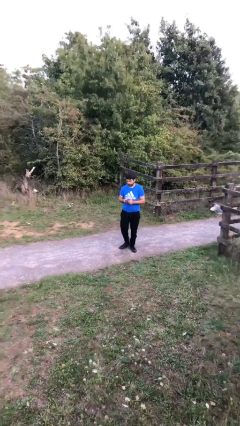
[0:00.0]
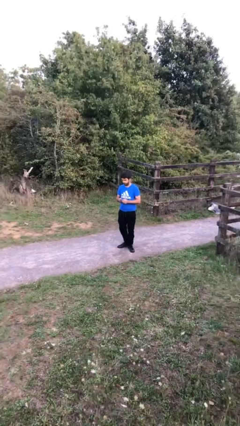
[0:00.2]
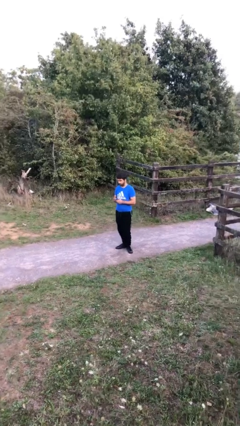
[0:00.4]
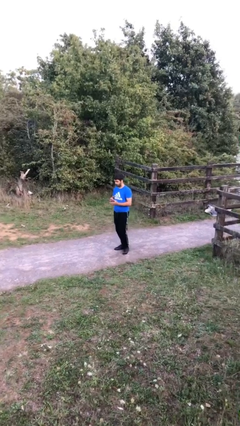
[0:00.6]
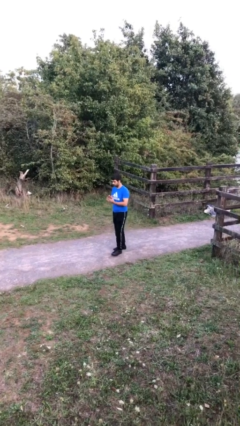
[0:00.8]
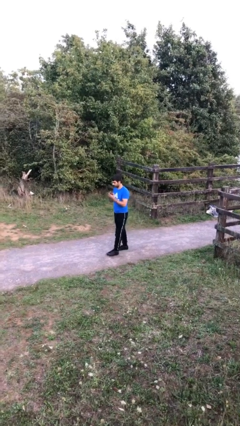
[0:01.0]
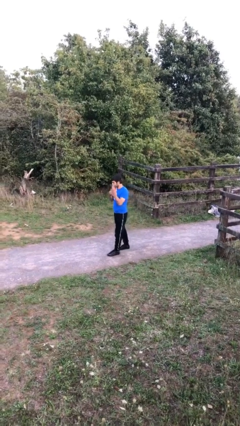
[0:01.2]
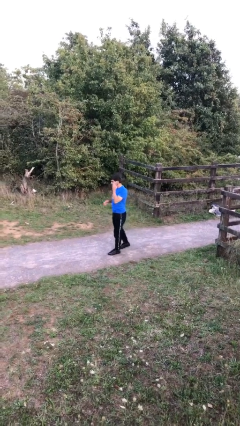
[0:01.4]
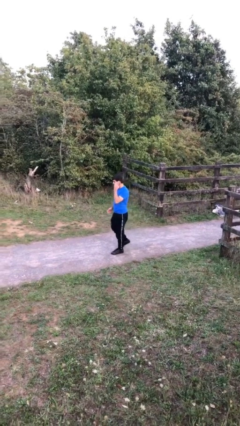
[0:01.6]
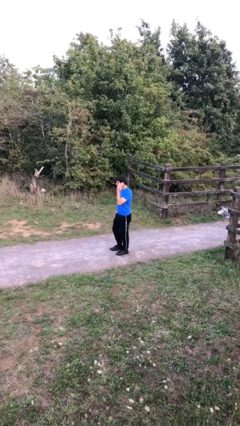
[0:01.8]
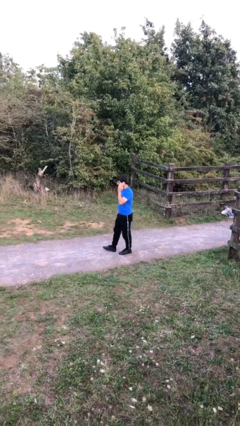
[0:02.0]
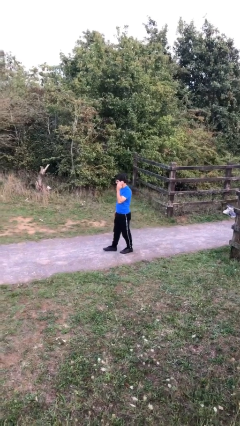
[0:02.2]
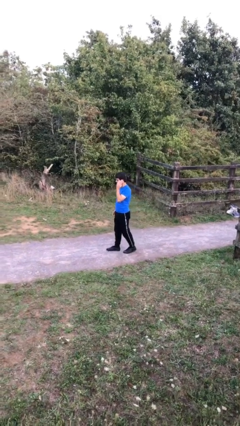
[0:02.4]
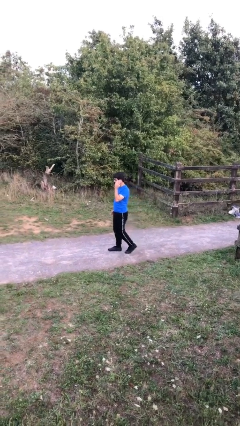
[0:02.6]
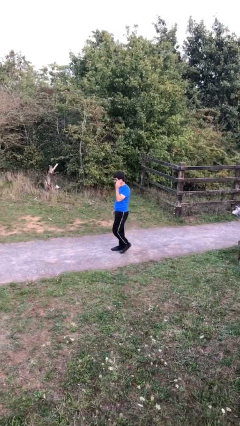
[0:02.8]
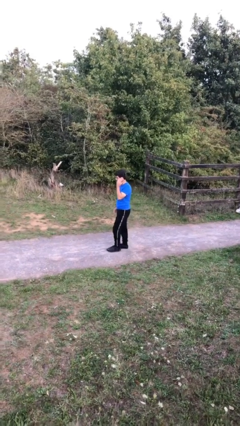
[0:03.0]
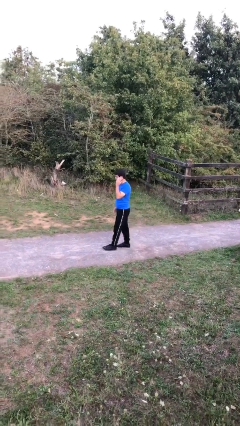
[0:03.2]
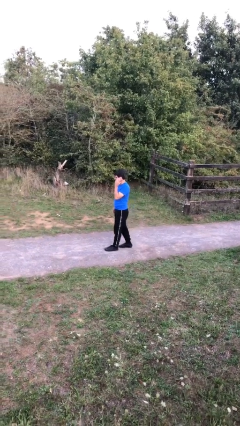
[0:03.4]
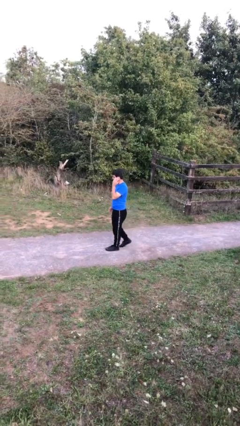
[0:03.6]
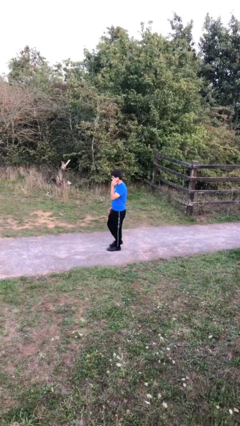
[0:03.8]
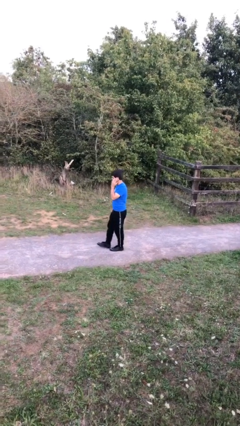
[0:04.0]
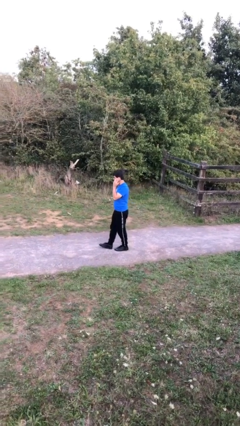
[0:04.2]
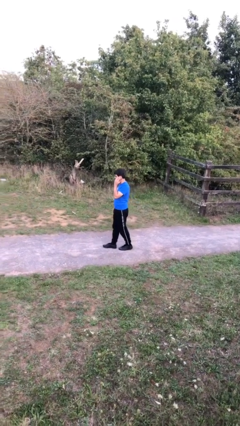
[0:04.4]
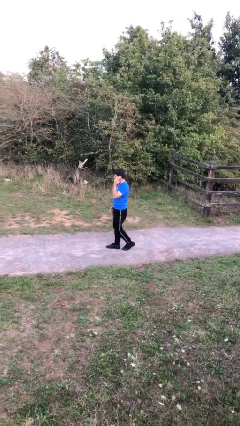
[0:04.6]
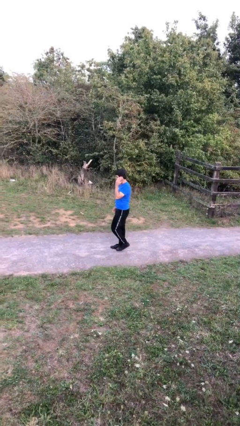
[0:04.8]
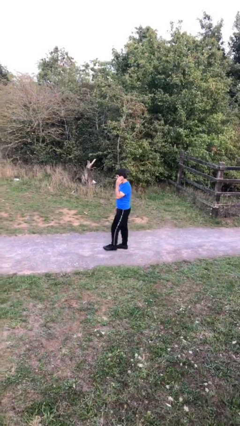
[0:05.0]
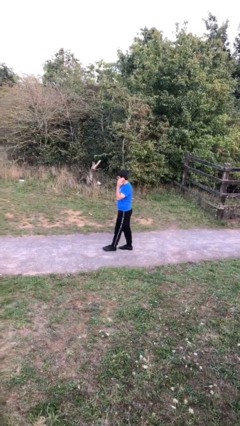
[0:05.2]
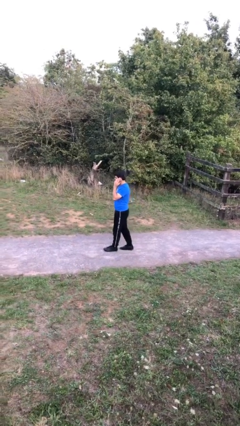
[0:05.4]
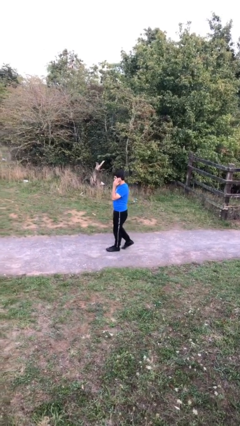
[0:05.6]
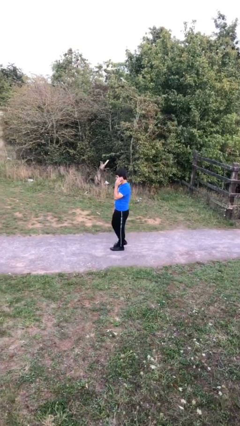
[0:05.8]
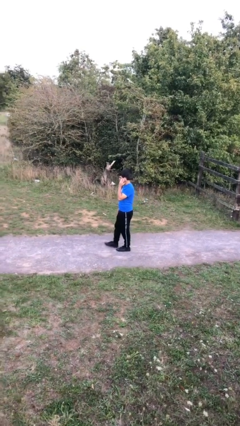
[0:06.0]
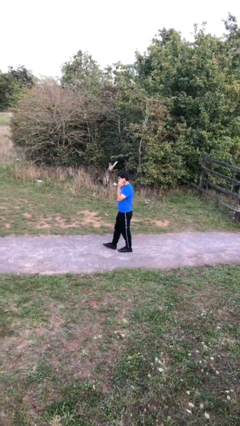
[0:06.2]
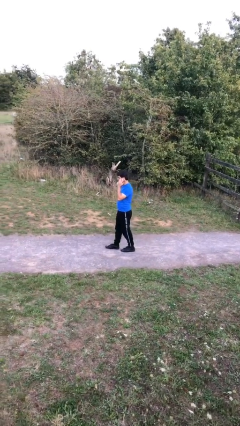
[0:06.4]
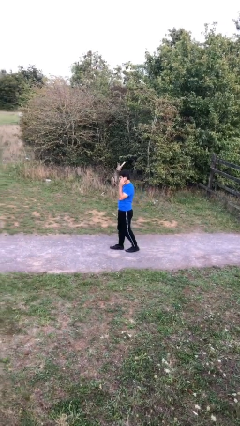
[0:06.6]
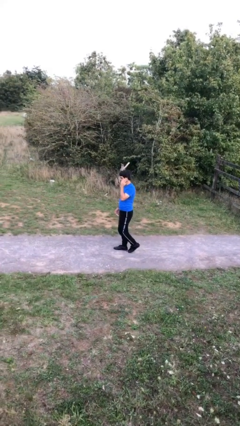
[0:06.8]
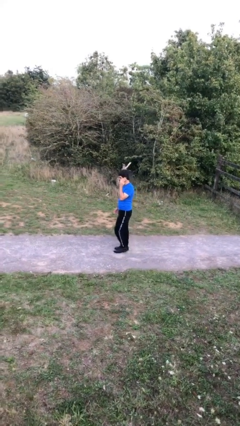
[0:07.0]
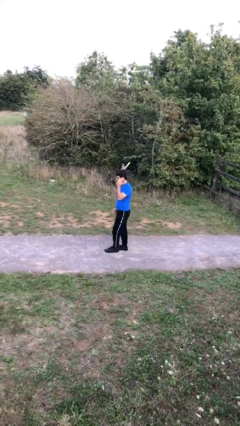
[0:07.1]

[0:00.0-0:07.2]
person talks on phone

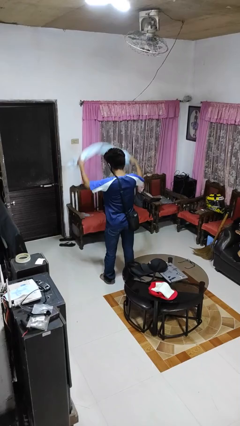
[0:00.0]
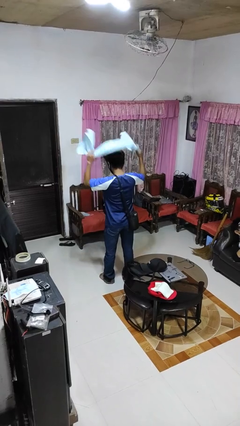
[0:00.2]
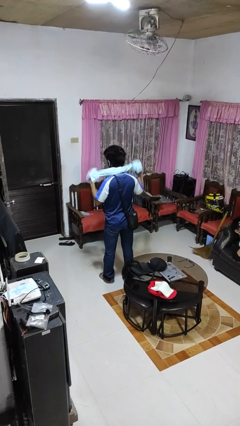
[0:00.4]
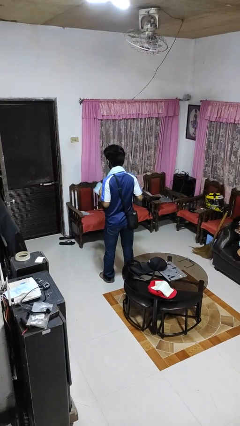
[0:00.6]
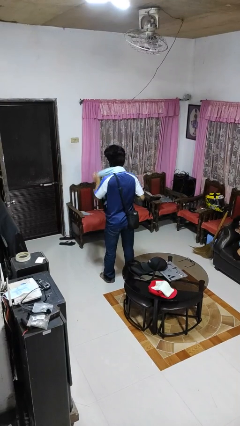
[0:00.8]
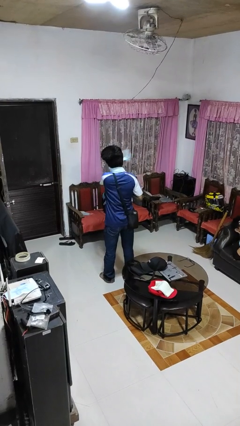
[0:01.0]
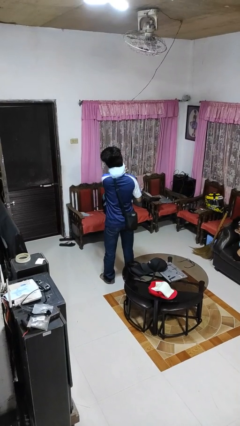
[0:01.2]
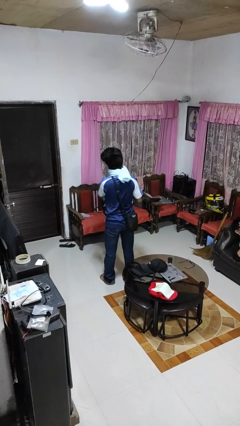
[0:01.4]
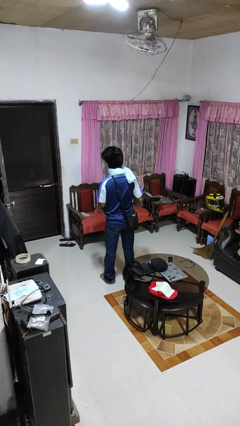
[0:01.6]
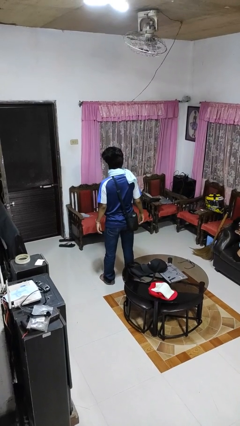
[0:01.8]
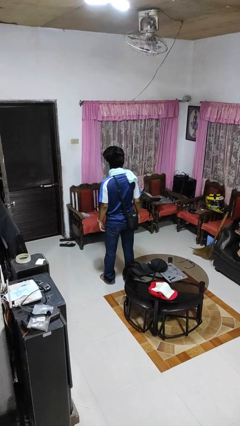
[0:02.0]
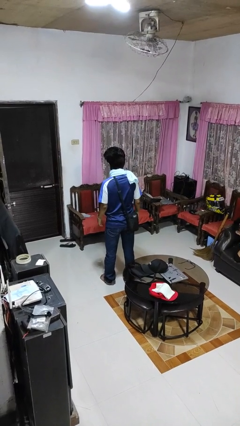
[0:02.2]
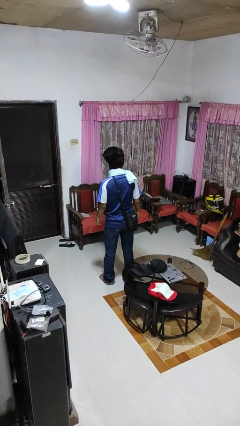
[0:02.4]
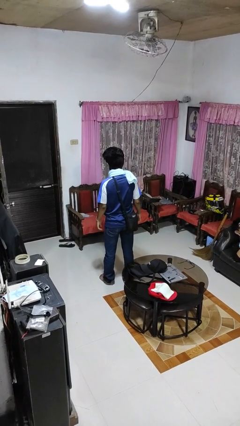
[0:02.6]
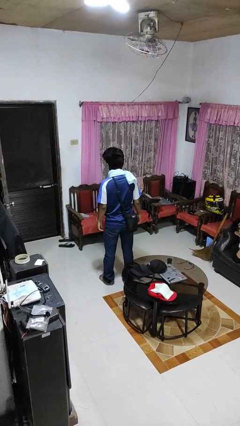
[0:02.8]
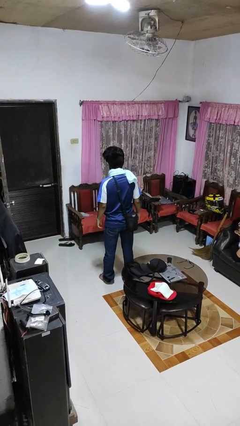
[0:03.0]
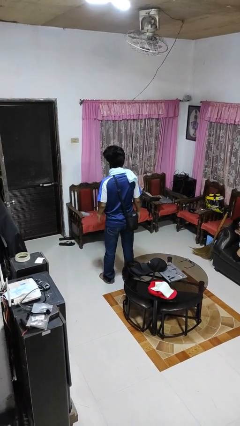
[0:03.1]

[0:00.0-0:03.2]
person puts on scarf

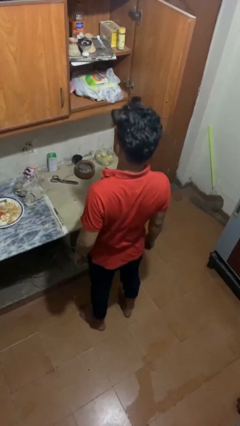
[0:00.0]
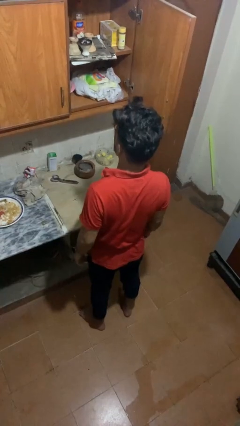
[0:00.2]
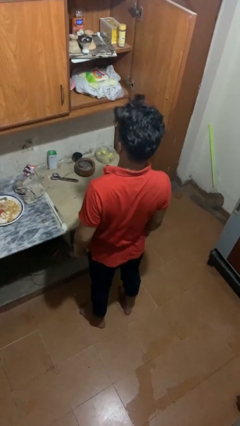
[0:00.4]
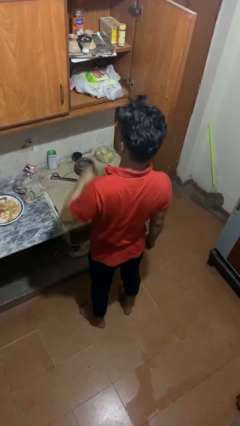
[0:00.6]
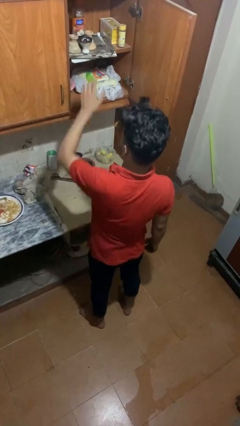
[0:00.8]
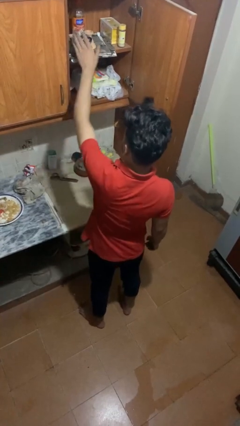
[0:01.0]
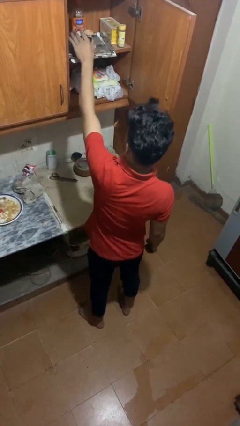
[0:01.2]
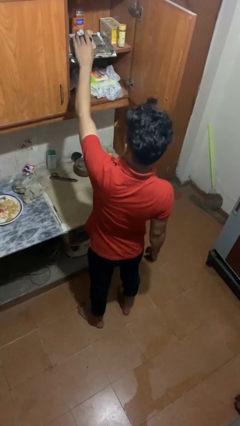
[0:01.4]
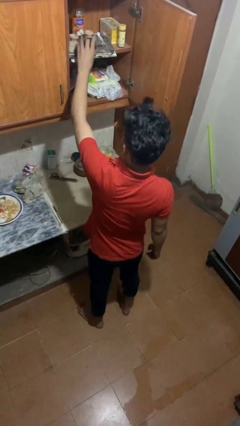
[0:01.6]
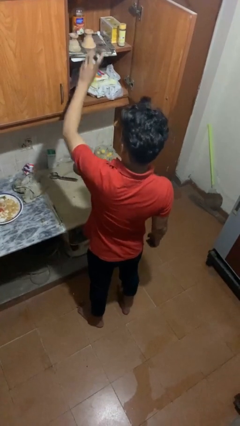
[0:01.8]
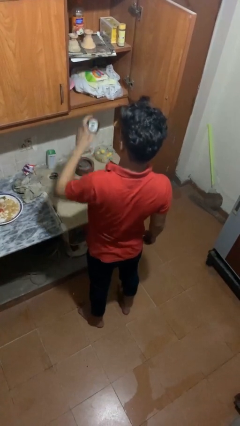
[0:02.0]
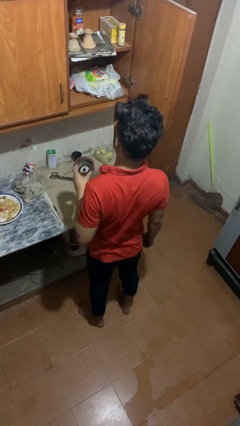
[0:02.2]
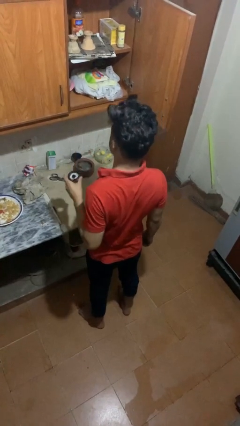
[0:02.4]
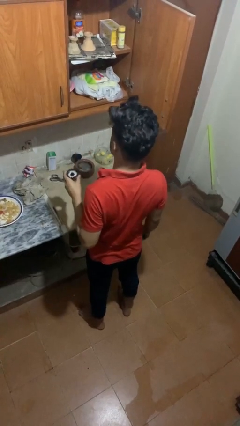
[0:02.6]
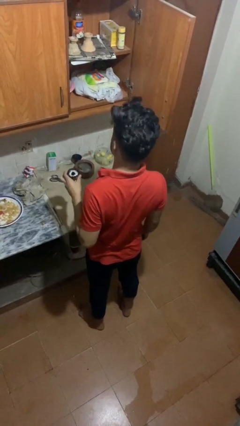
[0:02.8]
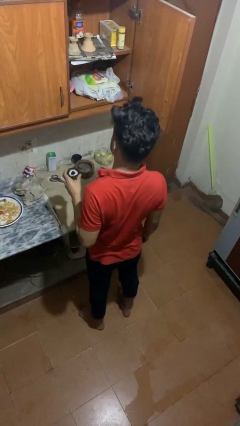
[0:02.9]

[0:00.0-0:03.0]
person takes object from cabinet

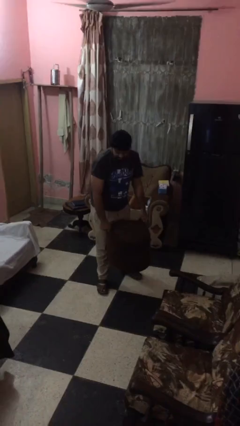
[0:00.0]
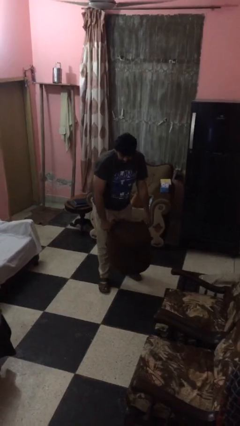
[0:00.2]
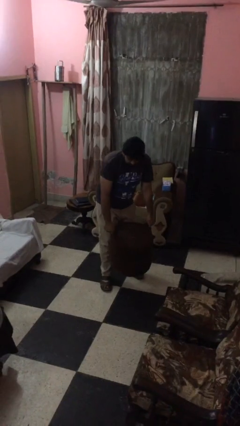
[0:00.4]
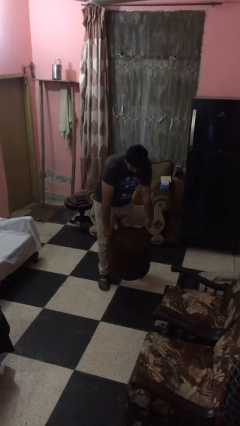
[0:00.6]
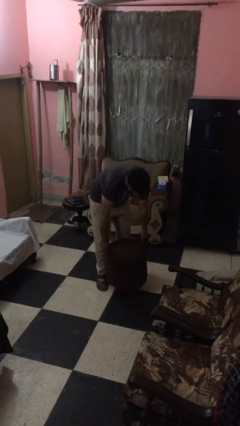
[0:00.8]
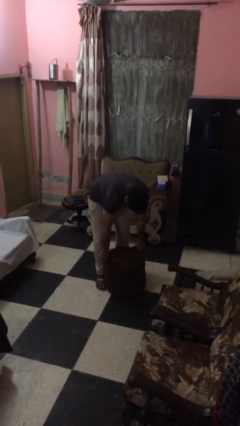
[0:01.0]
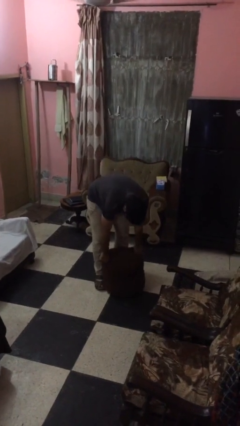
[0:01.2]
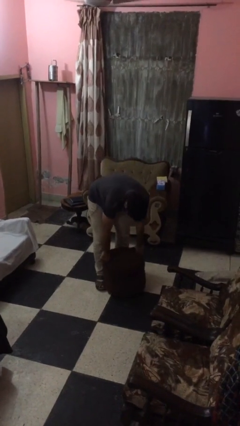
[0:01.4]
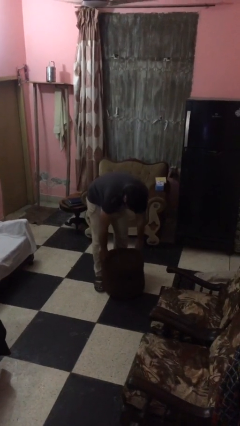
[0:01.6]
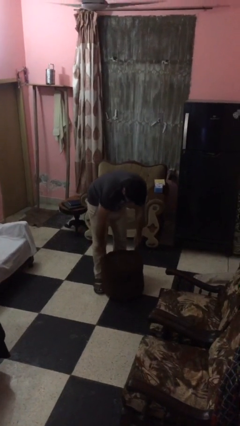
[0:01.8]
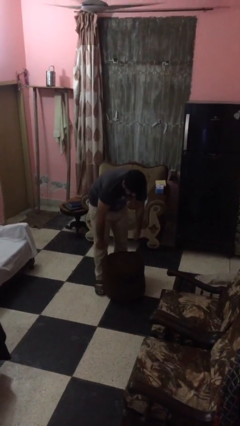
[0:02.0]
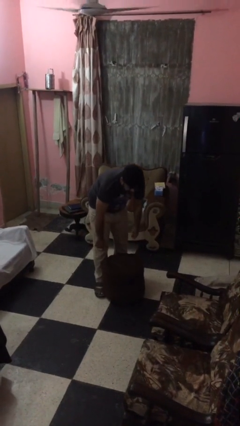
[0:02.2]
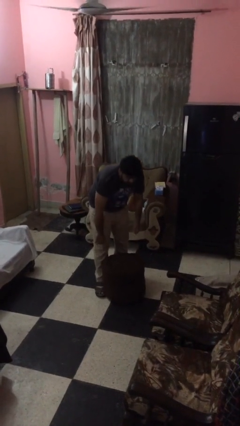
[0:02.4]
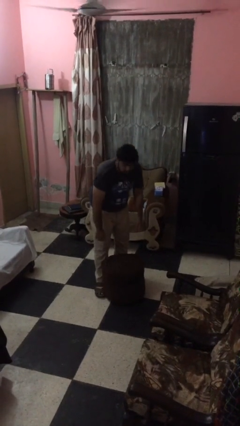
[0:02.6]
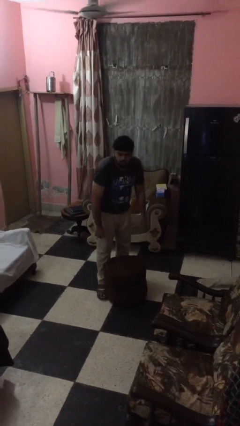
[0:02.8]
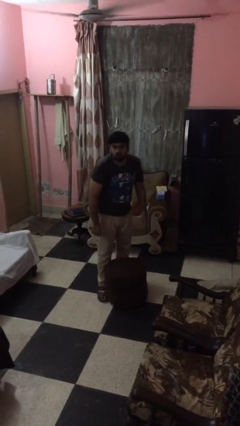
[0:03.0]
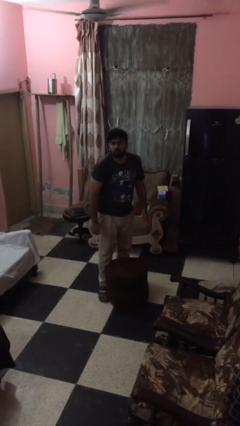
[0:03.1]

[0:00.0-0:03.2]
person puts down object on floor

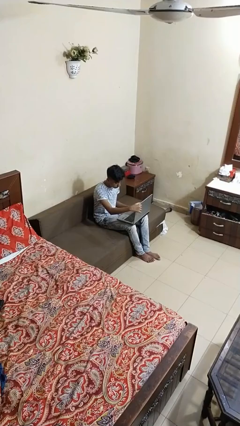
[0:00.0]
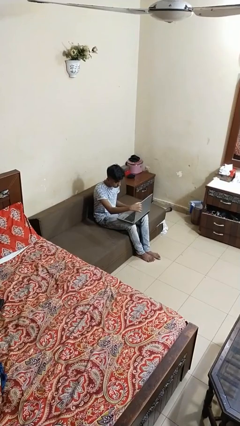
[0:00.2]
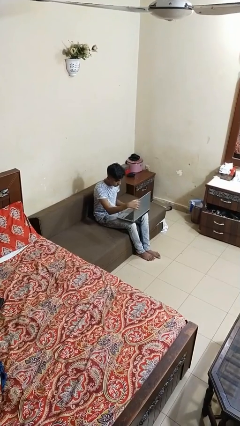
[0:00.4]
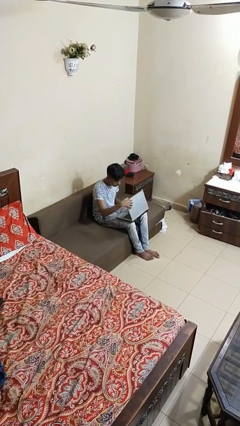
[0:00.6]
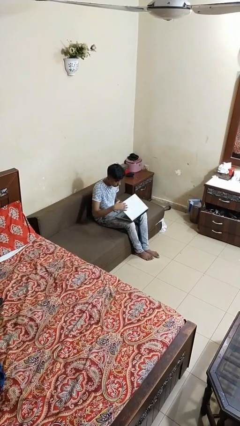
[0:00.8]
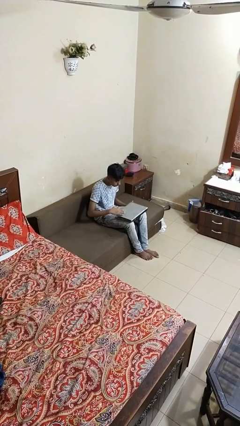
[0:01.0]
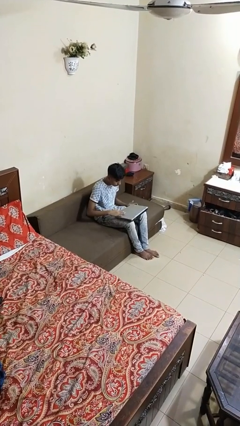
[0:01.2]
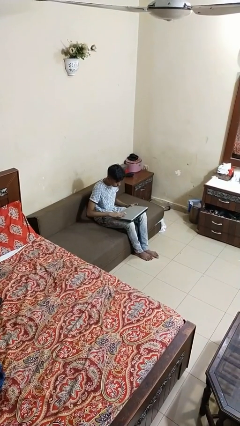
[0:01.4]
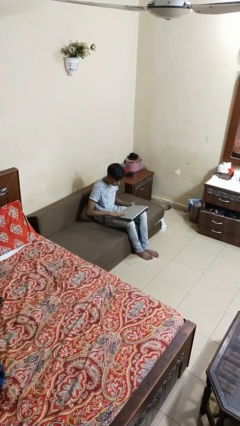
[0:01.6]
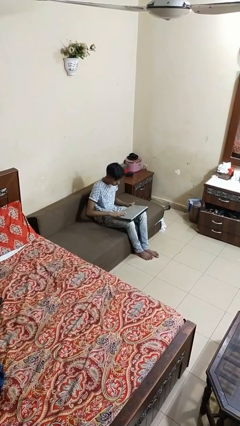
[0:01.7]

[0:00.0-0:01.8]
person closes laptop
